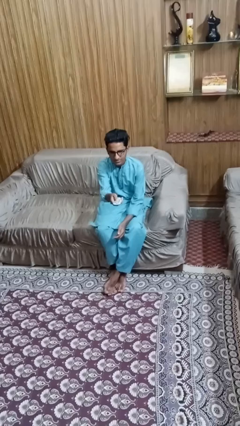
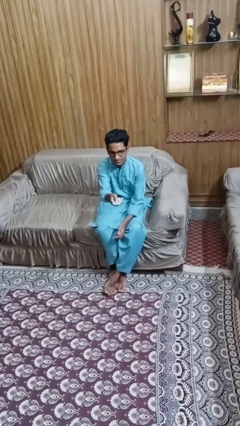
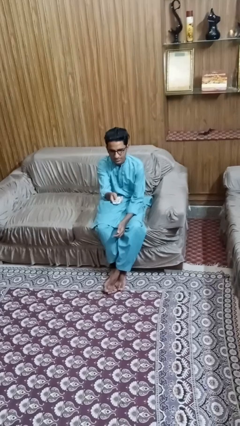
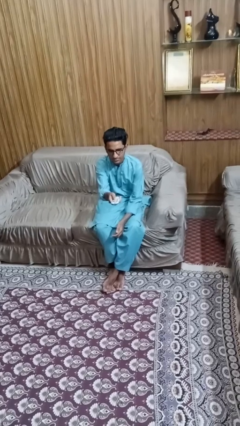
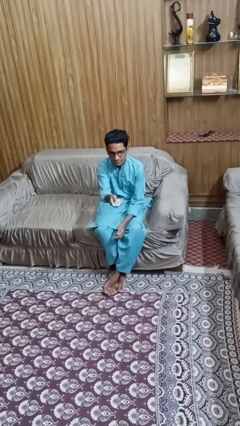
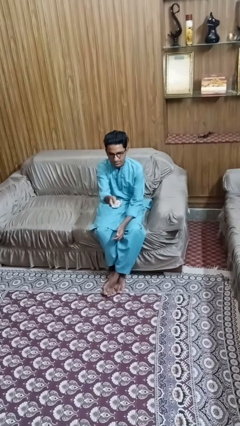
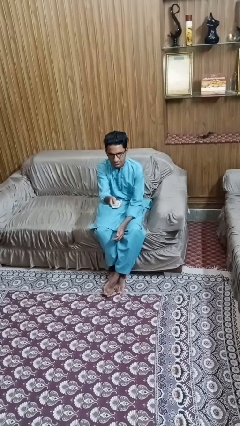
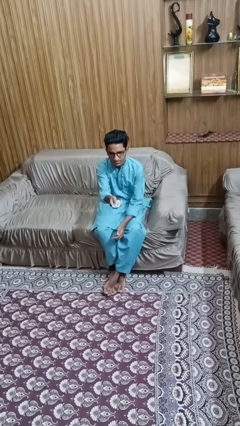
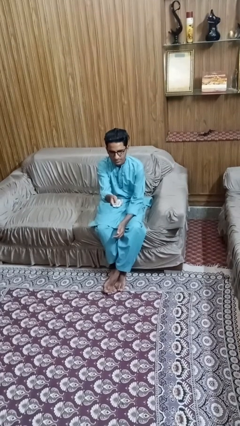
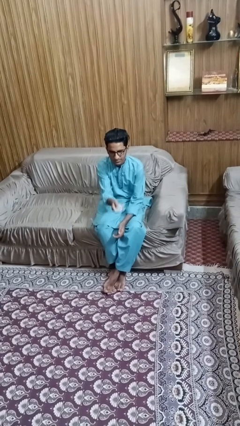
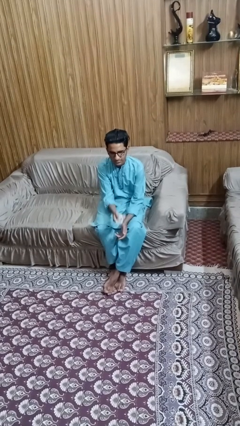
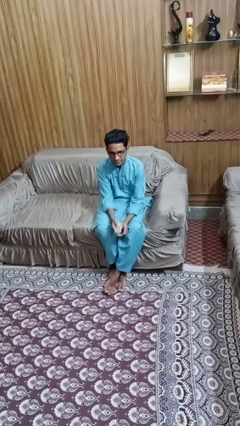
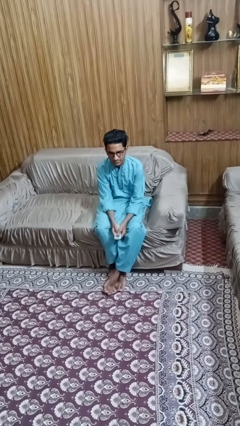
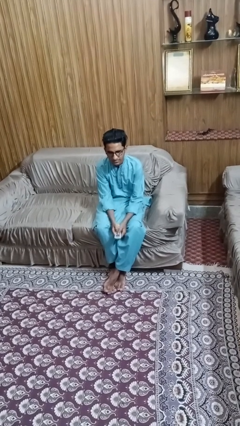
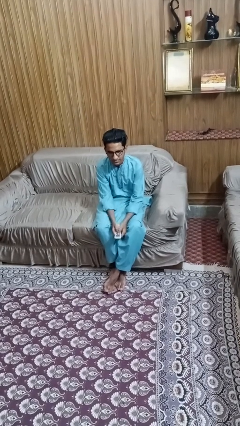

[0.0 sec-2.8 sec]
person uses television remote

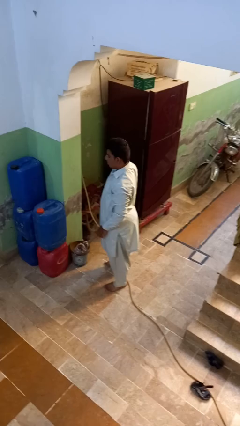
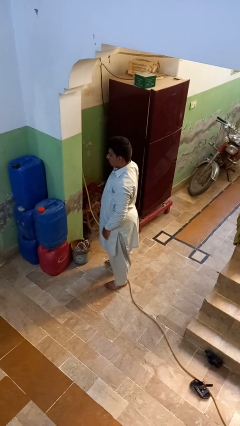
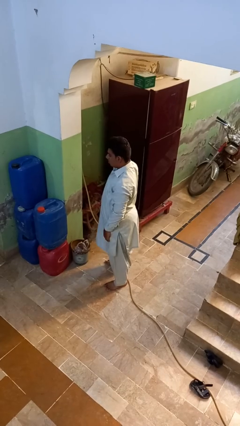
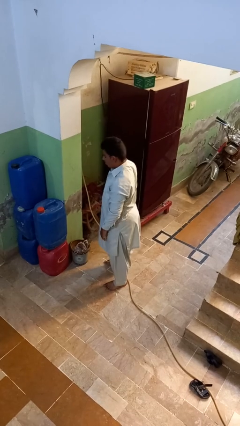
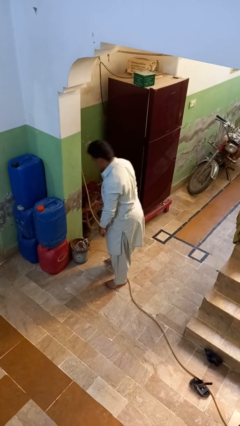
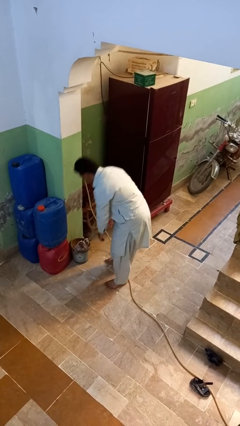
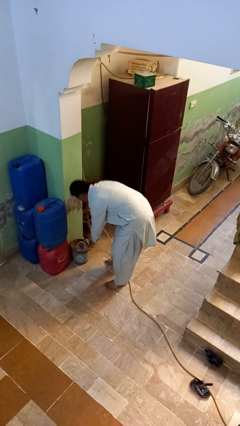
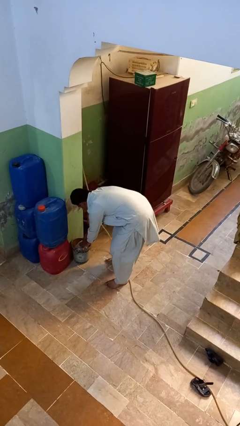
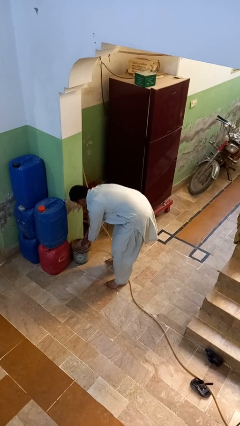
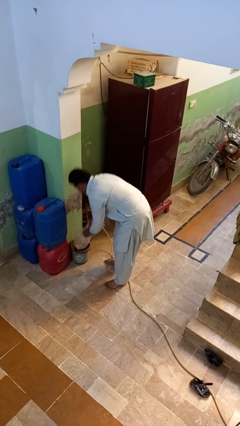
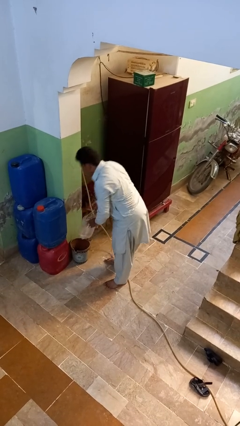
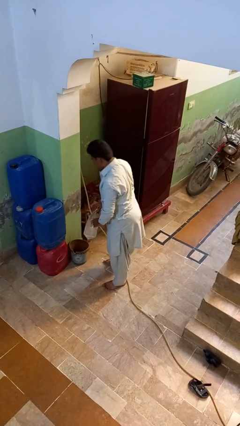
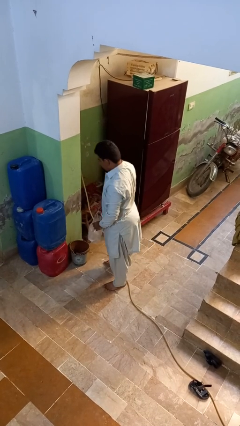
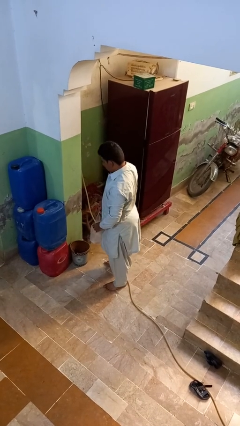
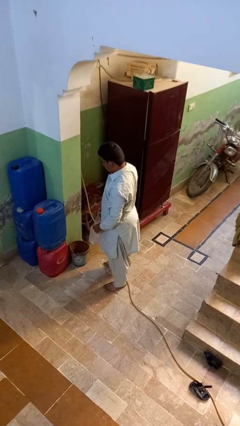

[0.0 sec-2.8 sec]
person removes trashbag from trashcan

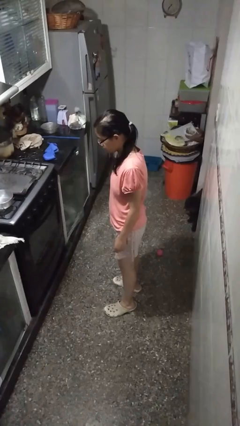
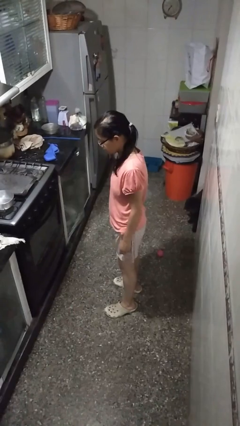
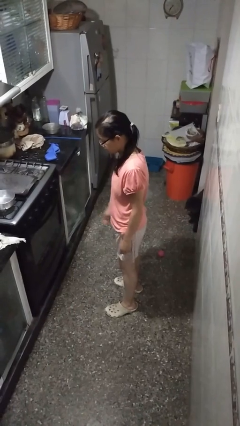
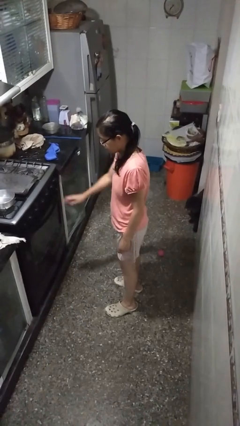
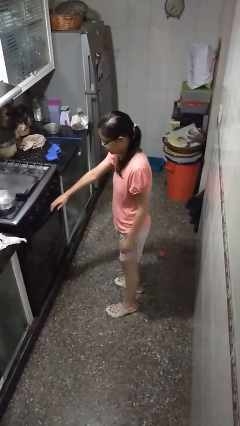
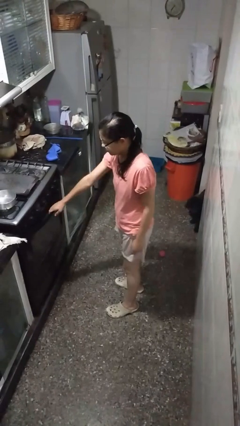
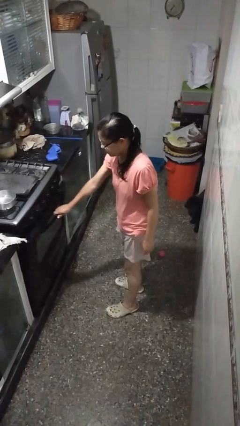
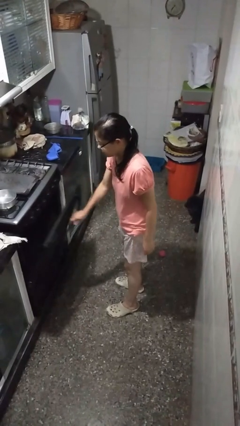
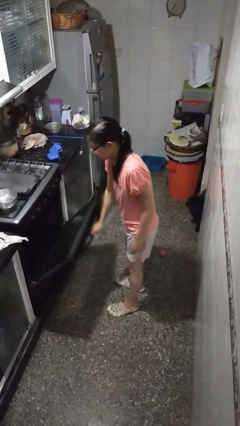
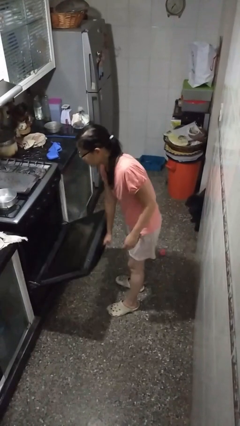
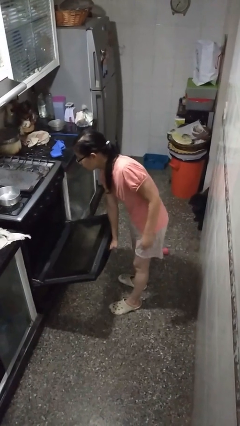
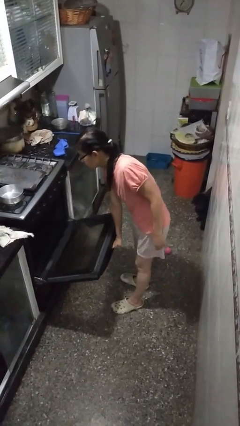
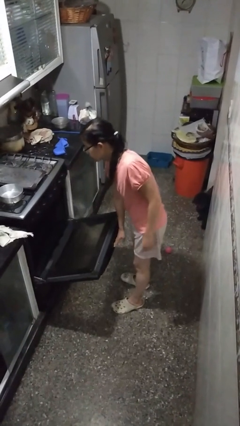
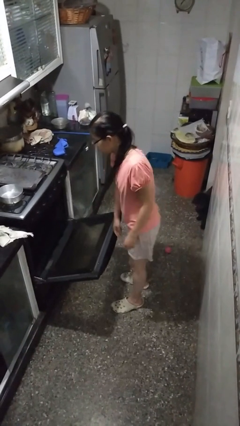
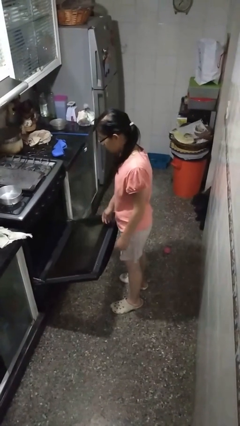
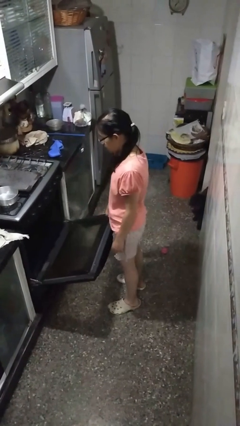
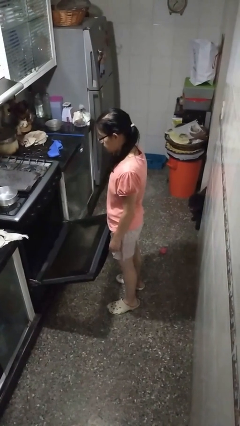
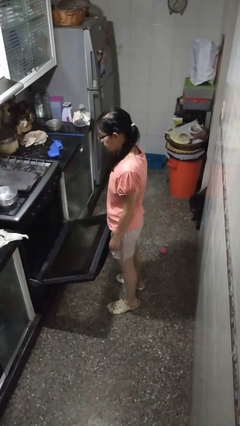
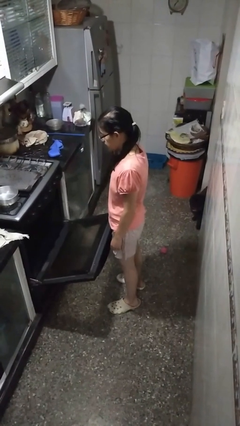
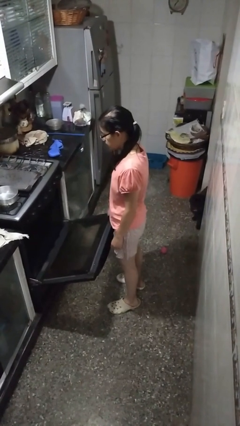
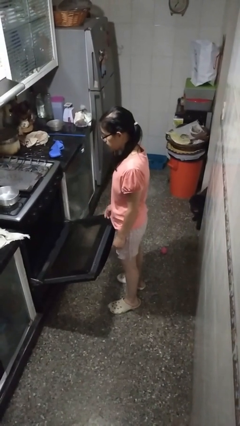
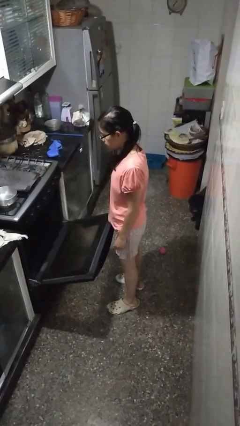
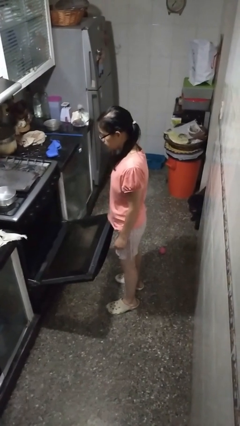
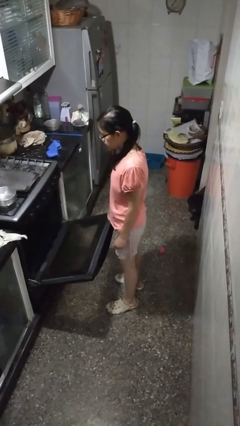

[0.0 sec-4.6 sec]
person opens oven door

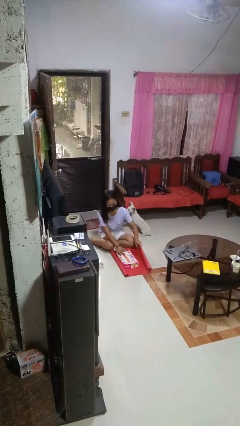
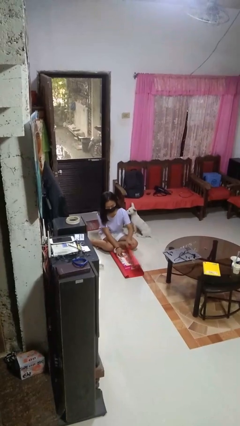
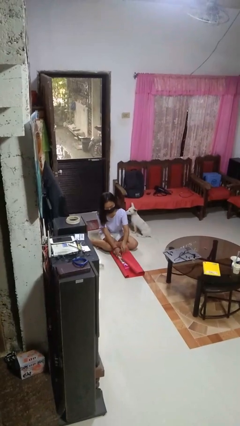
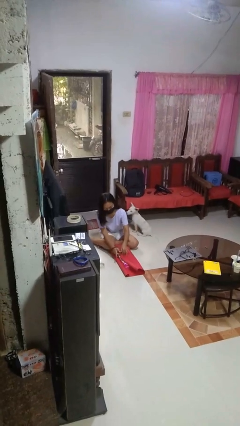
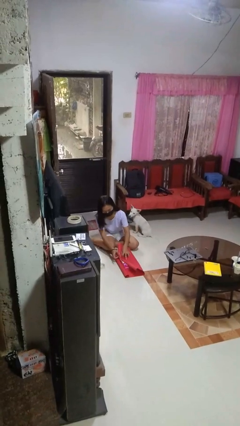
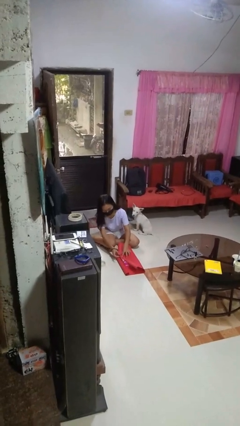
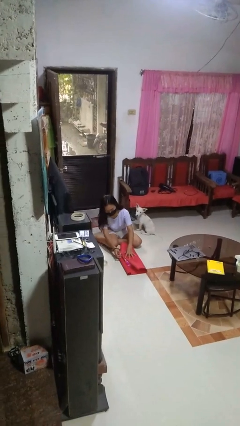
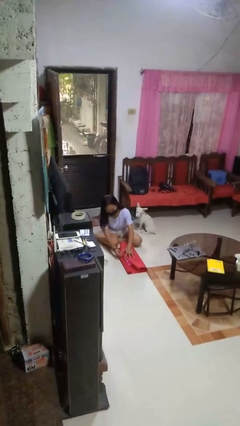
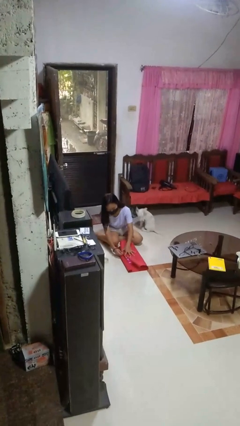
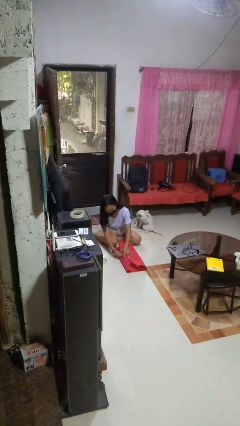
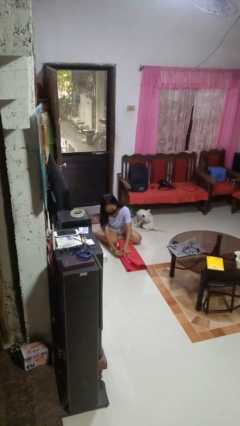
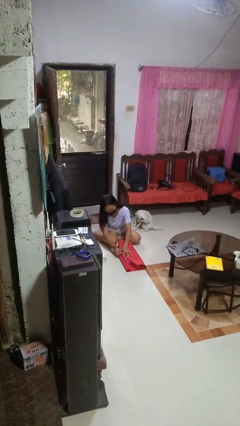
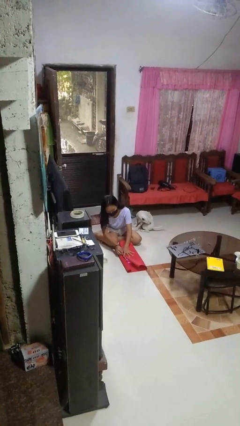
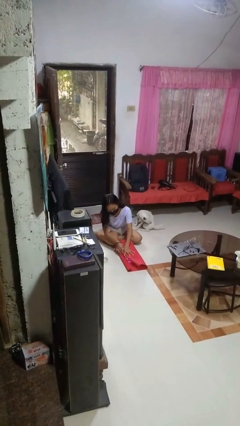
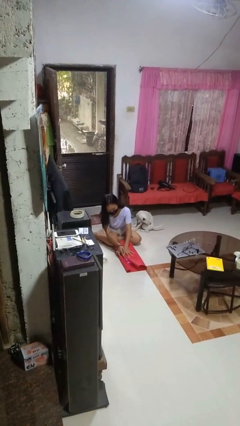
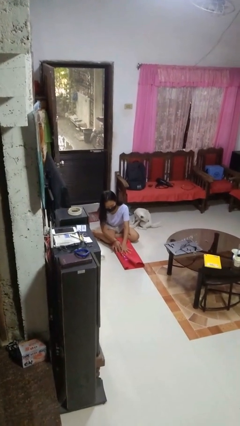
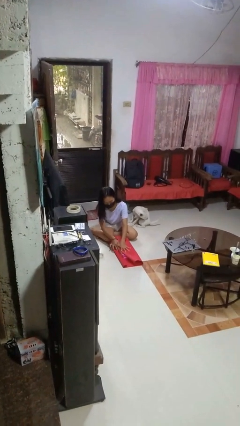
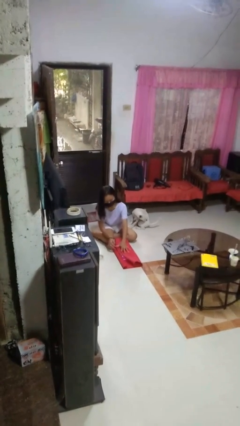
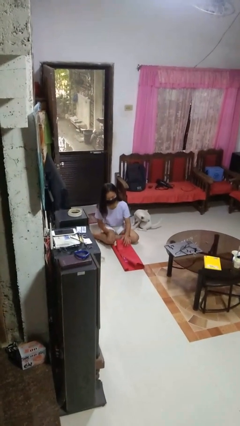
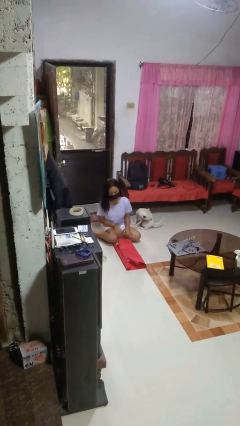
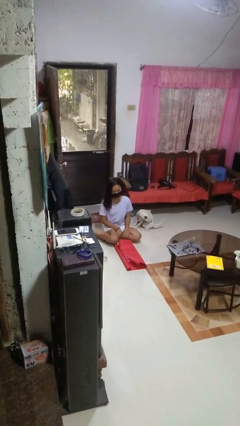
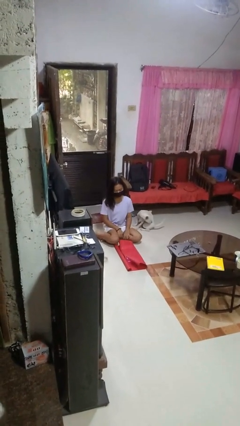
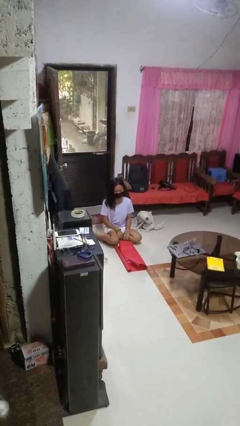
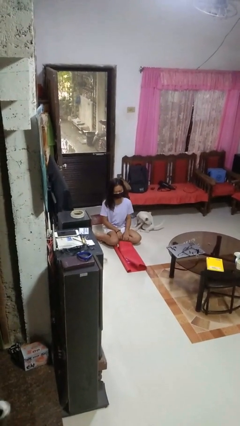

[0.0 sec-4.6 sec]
person wraps box

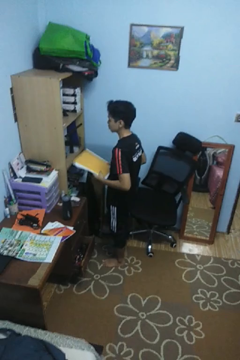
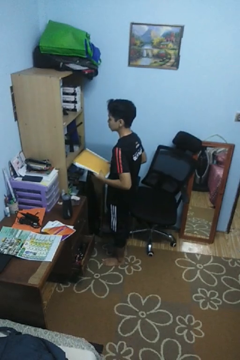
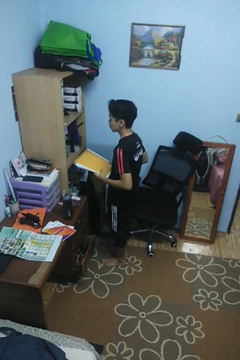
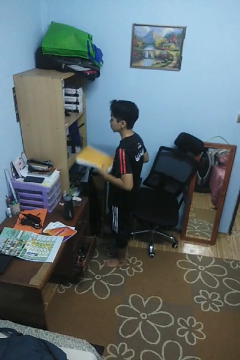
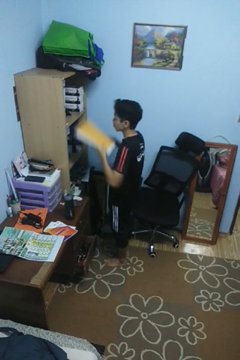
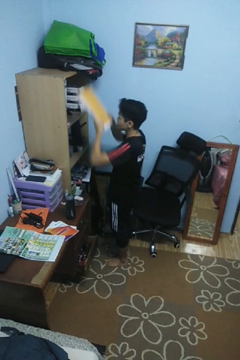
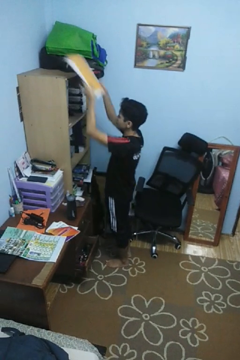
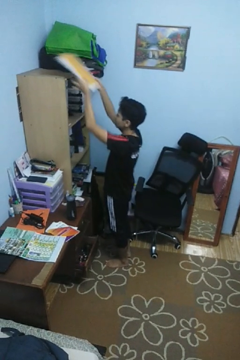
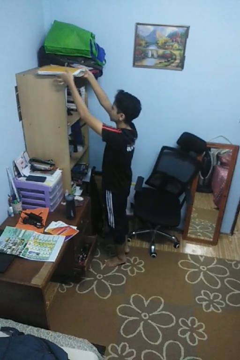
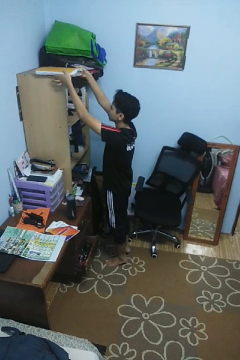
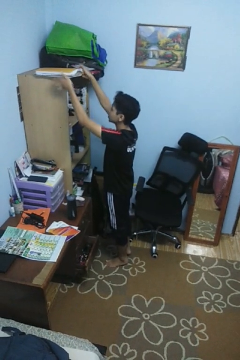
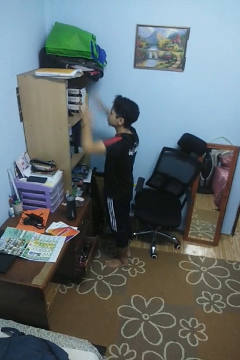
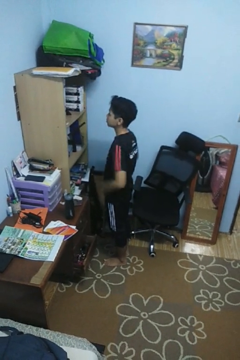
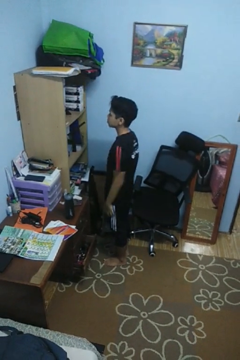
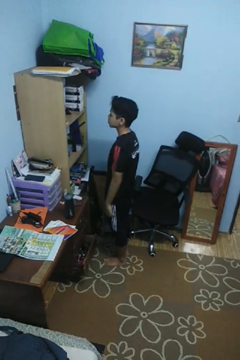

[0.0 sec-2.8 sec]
person puts down object on shelf
